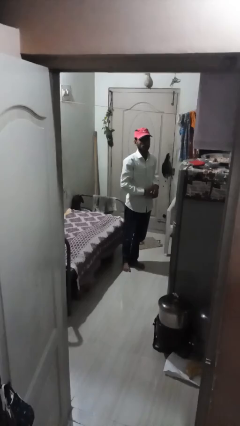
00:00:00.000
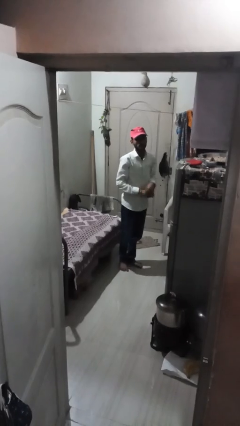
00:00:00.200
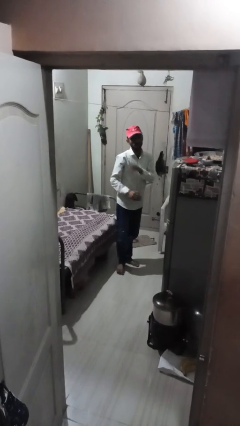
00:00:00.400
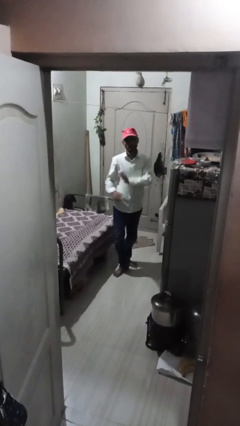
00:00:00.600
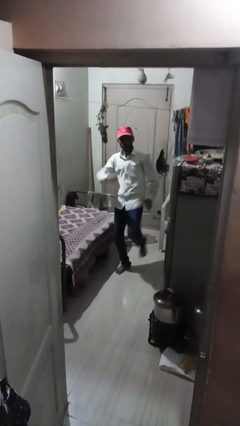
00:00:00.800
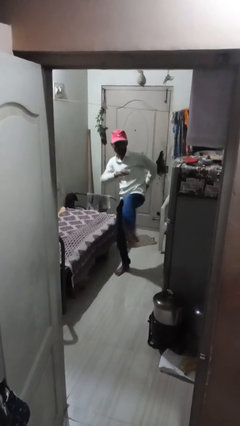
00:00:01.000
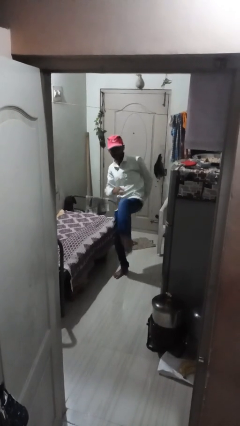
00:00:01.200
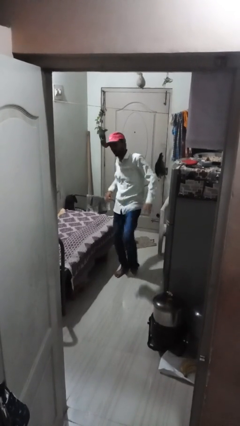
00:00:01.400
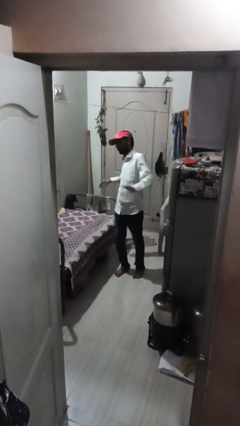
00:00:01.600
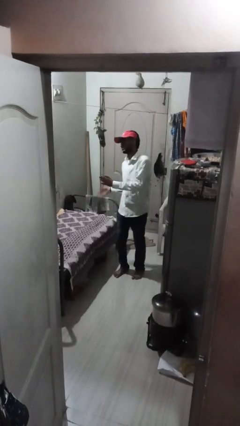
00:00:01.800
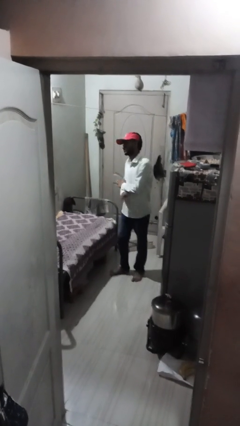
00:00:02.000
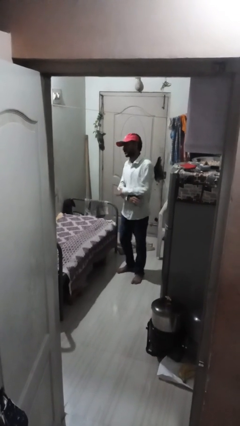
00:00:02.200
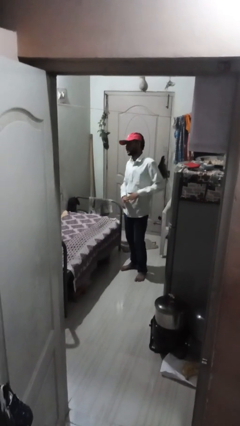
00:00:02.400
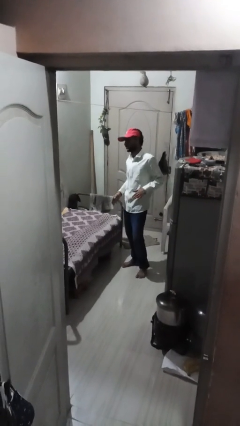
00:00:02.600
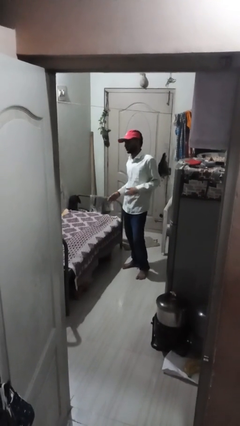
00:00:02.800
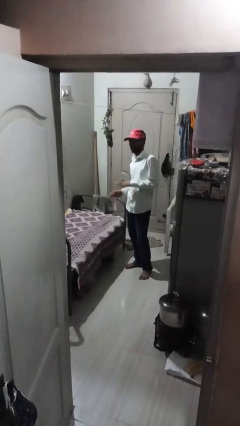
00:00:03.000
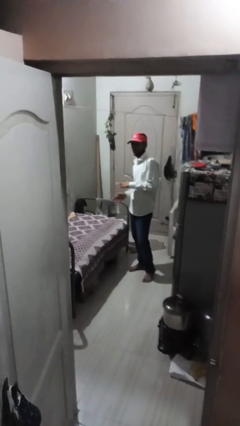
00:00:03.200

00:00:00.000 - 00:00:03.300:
person karate kicks

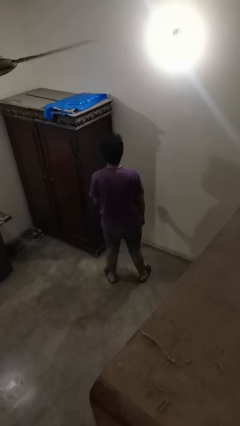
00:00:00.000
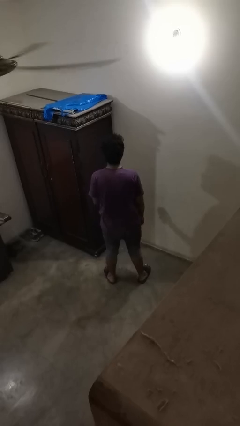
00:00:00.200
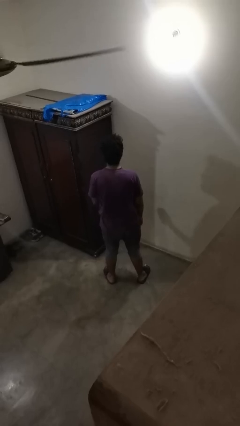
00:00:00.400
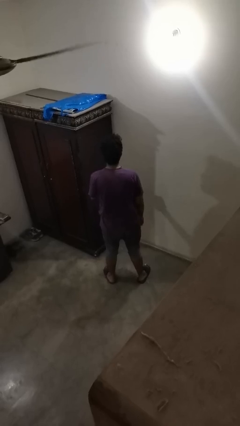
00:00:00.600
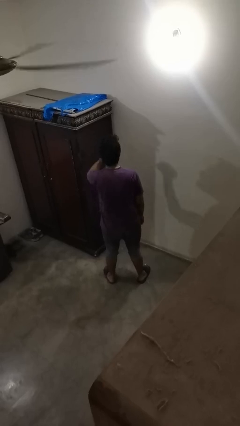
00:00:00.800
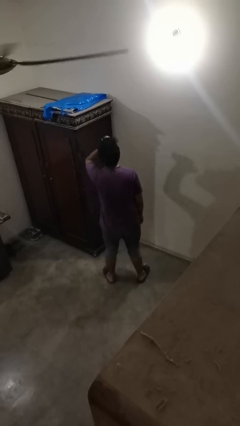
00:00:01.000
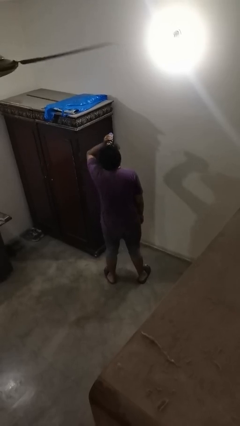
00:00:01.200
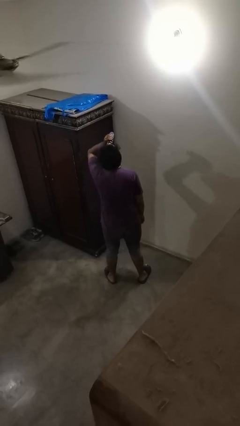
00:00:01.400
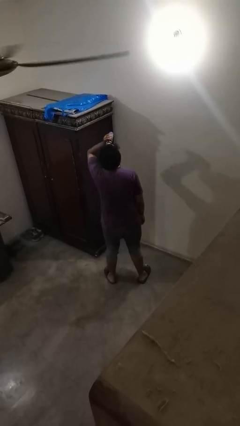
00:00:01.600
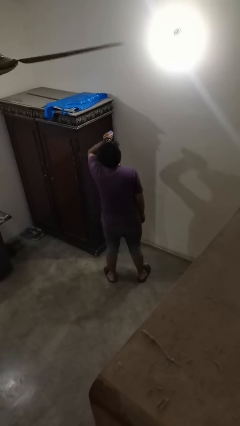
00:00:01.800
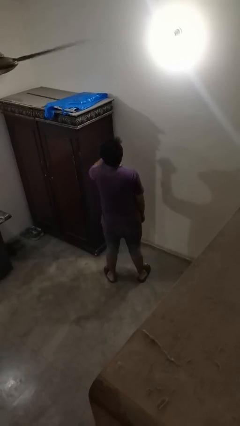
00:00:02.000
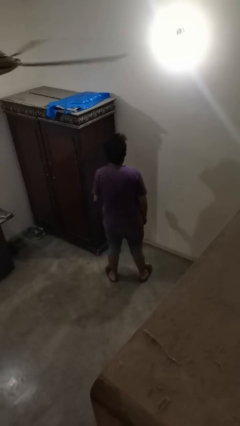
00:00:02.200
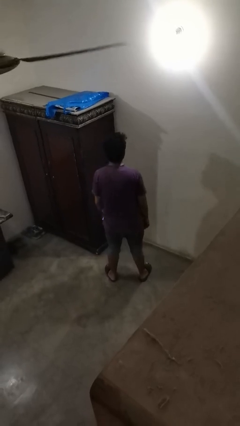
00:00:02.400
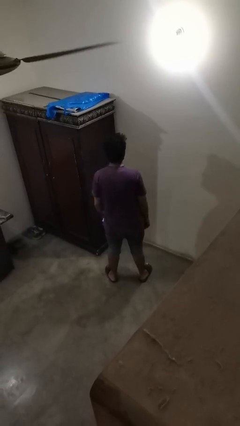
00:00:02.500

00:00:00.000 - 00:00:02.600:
person drinks from beverage can

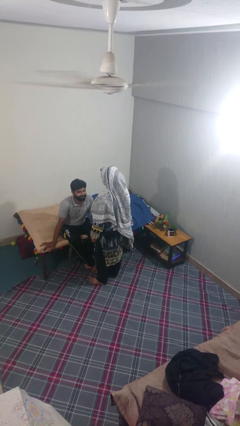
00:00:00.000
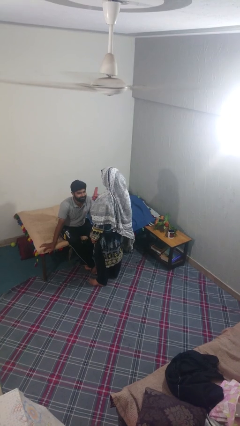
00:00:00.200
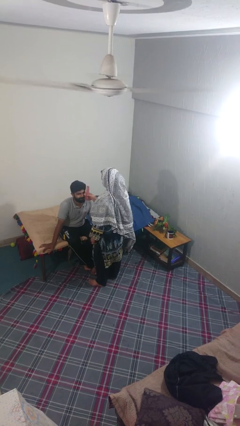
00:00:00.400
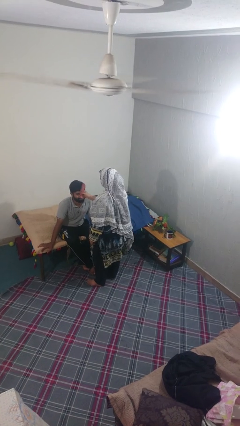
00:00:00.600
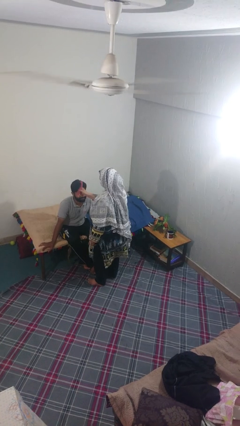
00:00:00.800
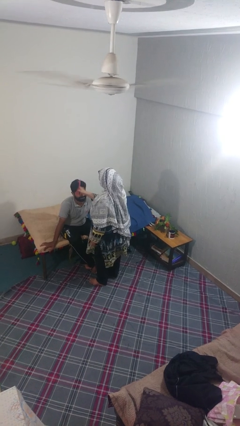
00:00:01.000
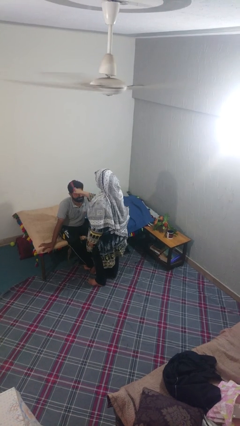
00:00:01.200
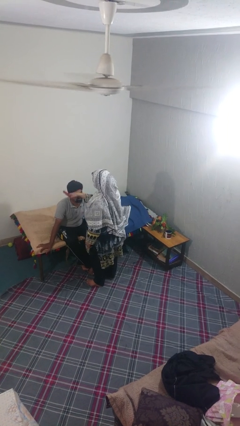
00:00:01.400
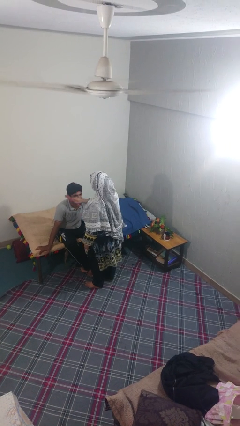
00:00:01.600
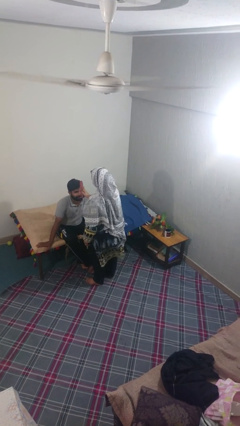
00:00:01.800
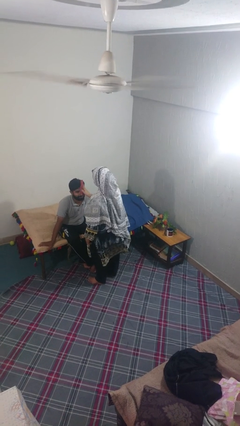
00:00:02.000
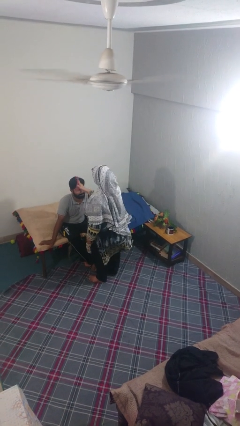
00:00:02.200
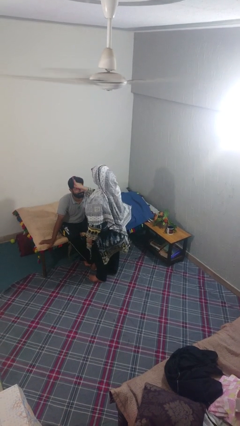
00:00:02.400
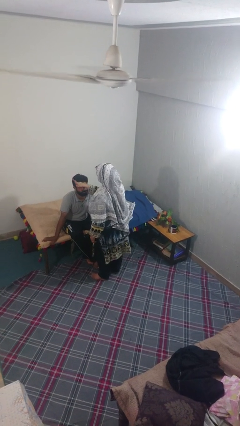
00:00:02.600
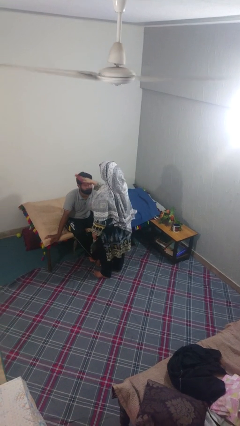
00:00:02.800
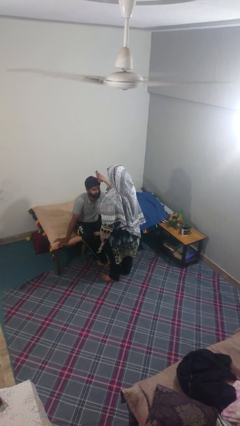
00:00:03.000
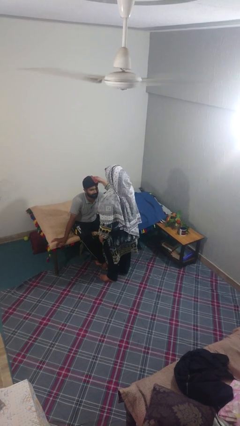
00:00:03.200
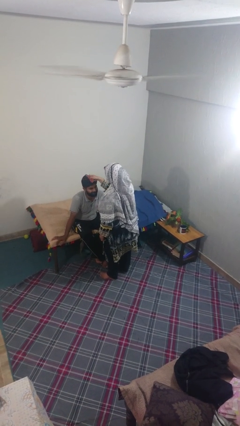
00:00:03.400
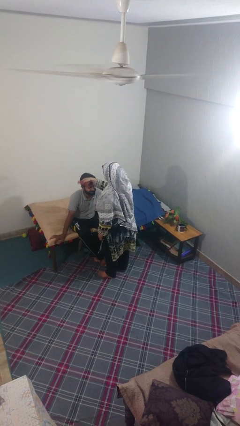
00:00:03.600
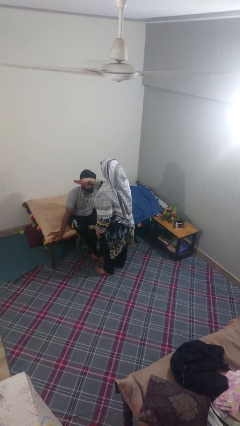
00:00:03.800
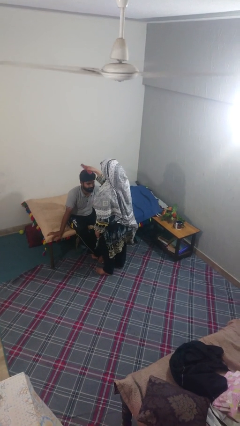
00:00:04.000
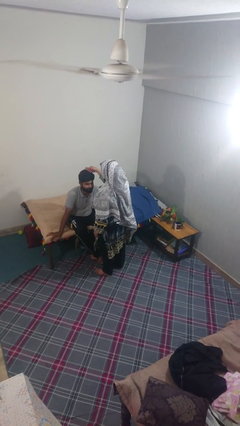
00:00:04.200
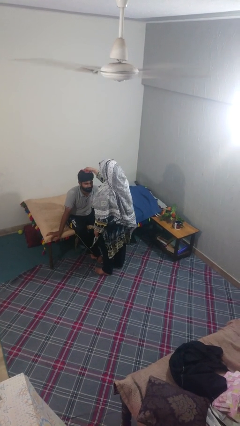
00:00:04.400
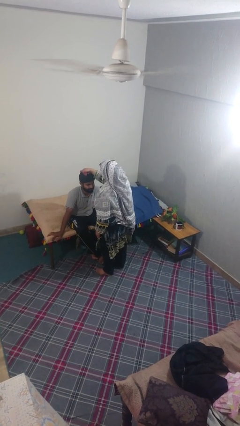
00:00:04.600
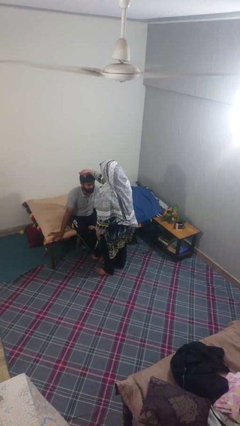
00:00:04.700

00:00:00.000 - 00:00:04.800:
person brushes hair of person

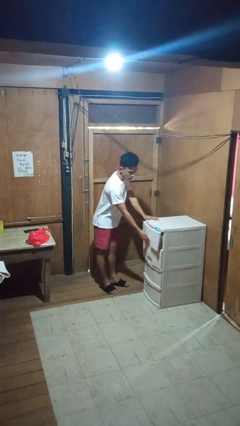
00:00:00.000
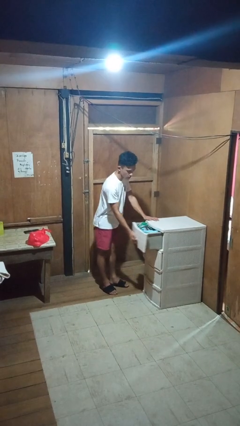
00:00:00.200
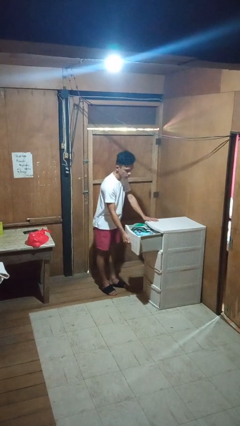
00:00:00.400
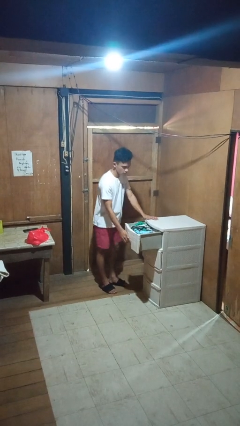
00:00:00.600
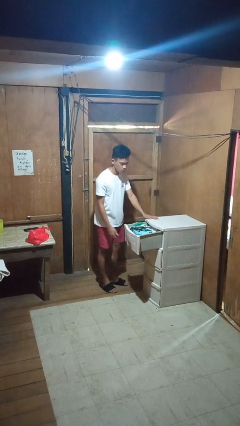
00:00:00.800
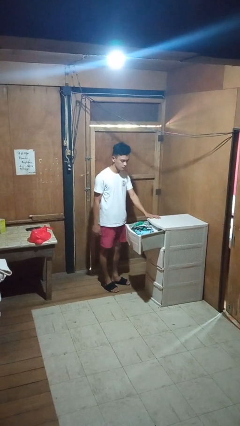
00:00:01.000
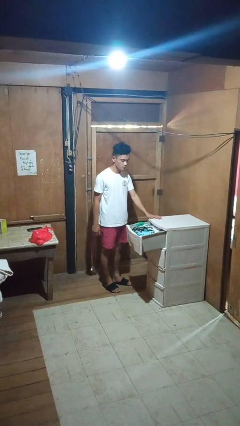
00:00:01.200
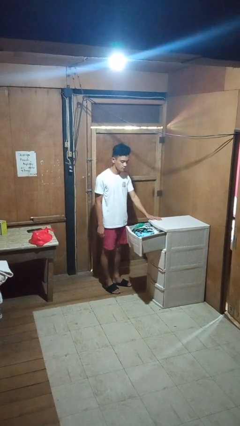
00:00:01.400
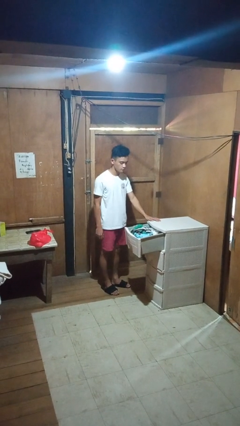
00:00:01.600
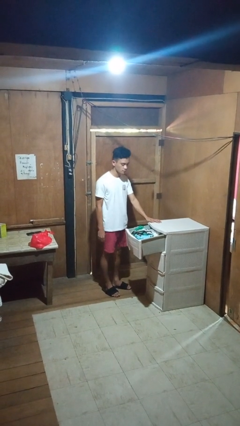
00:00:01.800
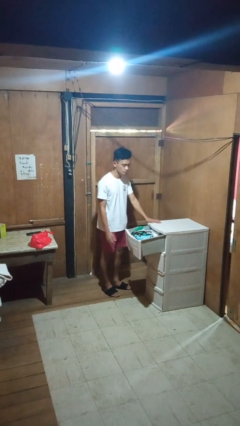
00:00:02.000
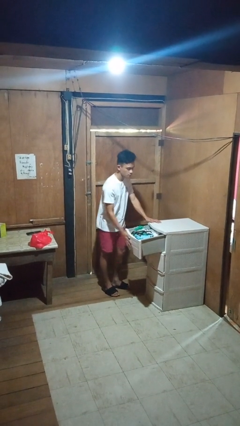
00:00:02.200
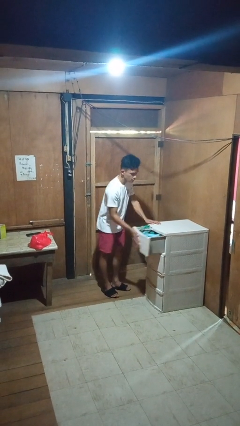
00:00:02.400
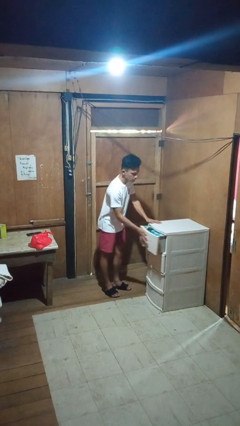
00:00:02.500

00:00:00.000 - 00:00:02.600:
person opens dresser drawer

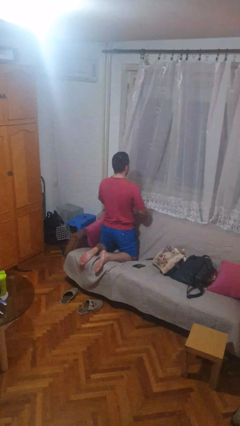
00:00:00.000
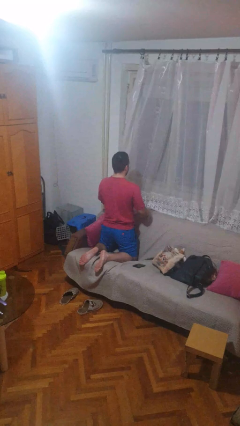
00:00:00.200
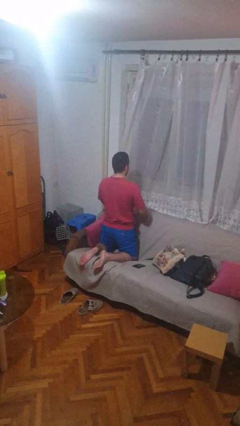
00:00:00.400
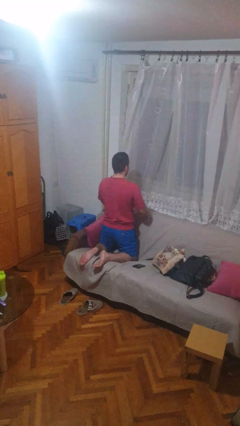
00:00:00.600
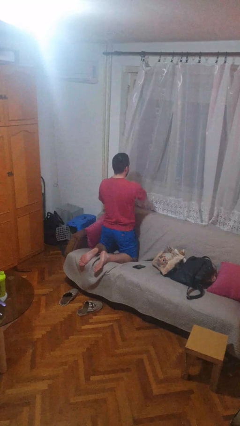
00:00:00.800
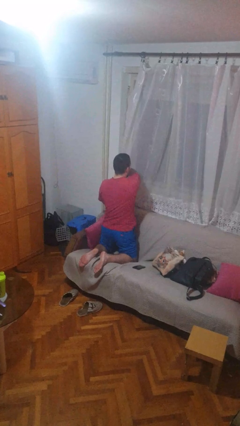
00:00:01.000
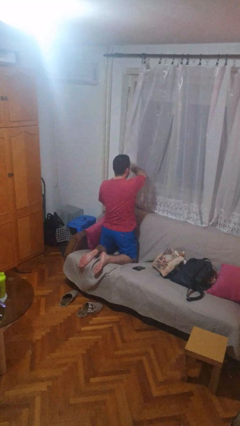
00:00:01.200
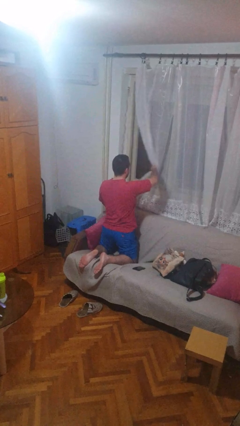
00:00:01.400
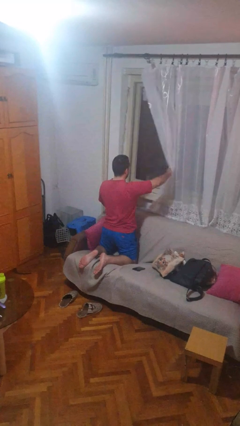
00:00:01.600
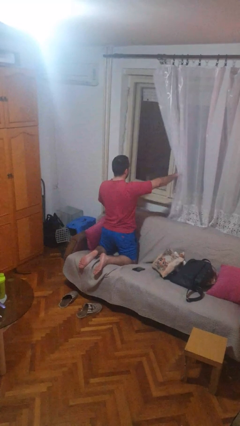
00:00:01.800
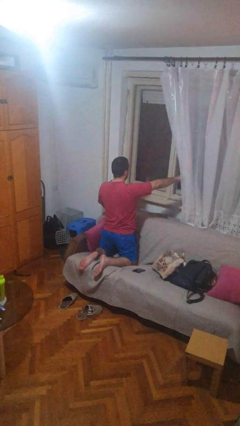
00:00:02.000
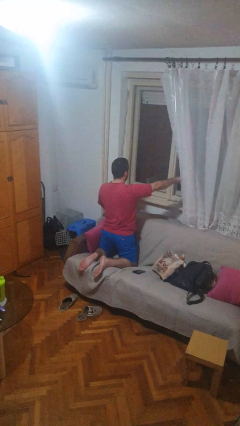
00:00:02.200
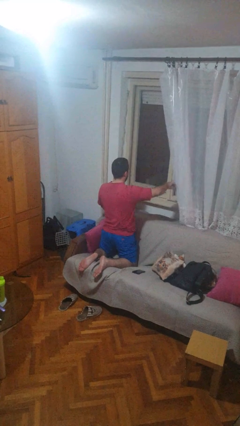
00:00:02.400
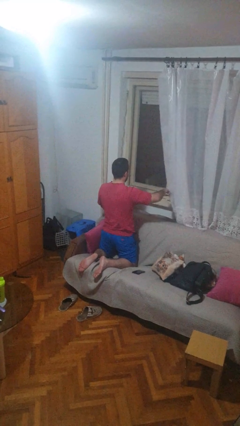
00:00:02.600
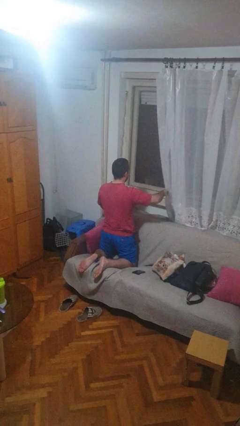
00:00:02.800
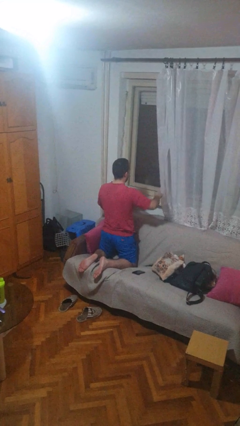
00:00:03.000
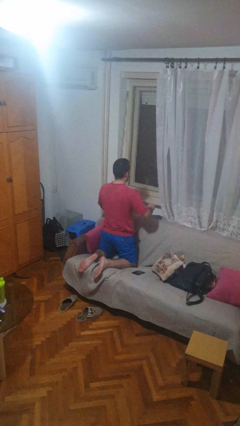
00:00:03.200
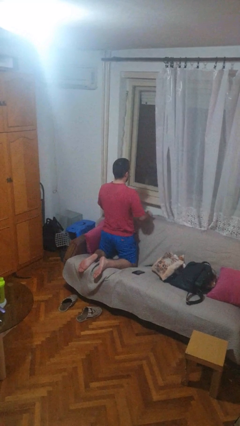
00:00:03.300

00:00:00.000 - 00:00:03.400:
person opens curtains

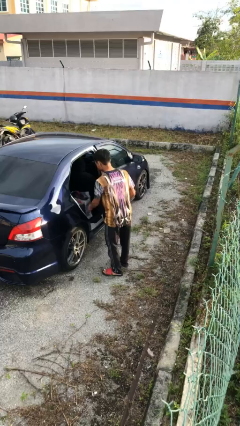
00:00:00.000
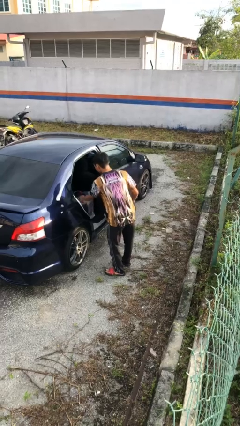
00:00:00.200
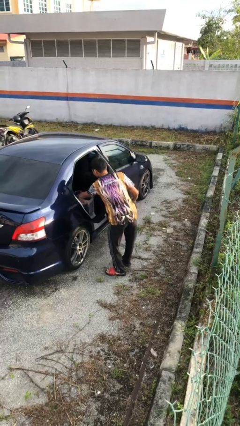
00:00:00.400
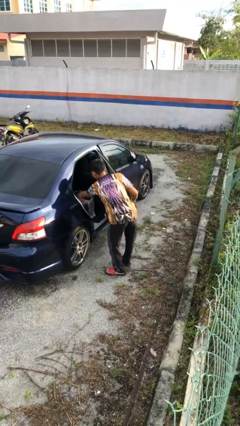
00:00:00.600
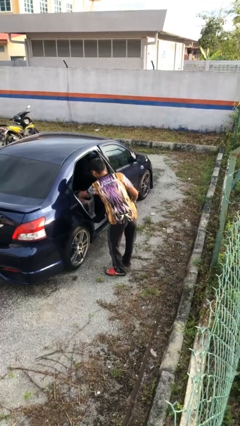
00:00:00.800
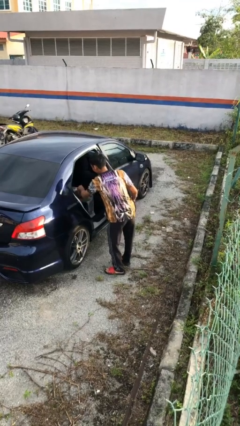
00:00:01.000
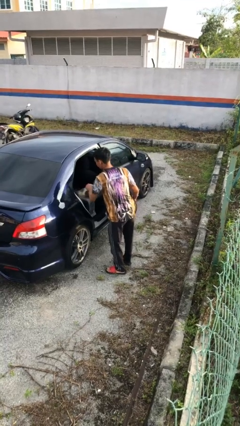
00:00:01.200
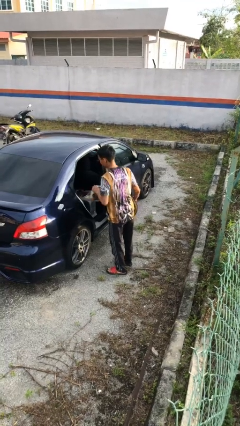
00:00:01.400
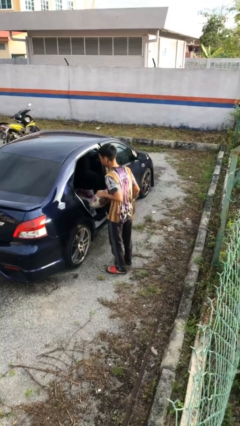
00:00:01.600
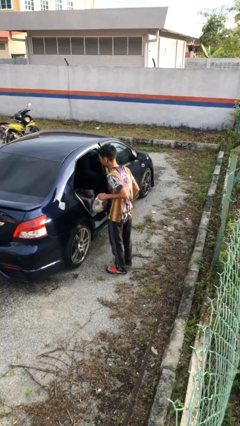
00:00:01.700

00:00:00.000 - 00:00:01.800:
person unloads car
